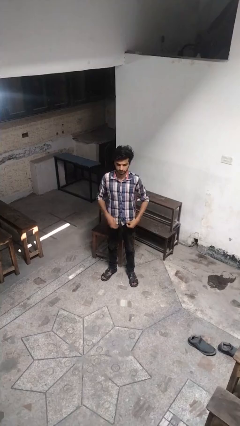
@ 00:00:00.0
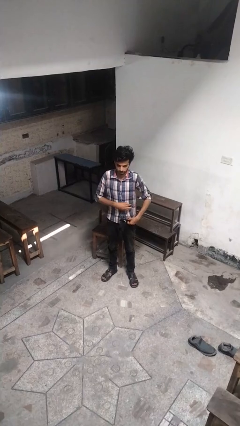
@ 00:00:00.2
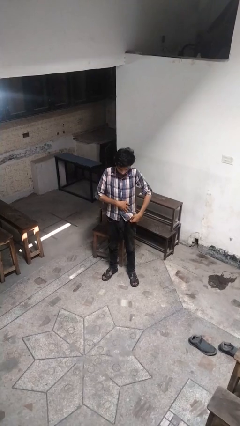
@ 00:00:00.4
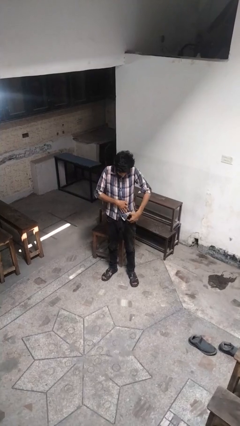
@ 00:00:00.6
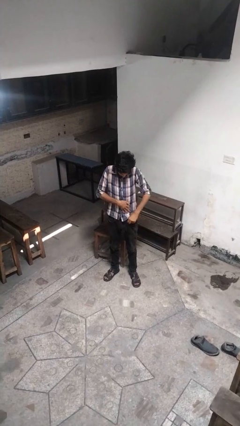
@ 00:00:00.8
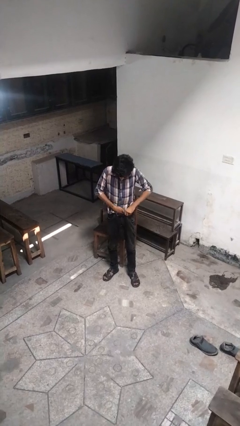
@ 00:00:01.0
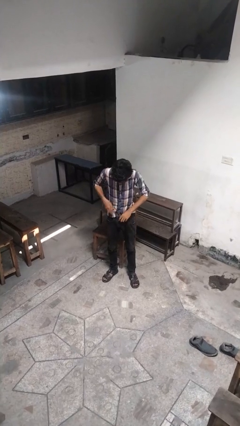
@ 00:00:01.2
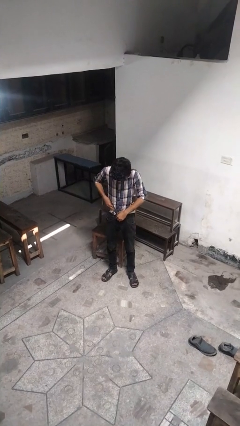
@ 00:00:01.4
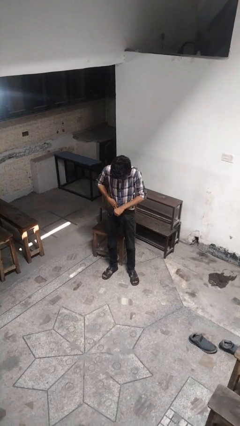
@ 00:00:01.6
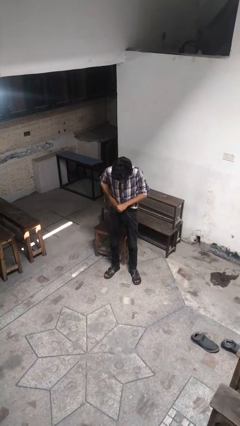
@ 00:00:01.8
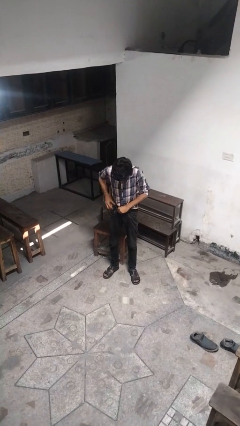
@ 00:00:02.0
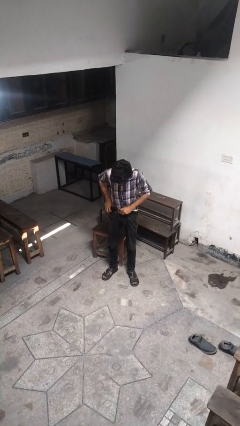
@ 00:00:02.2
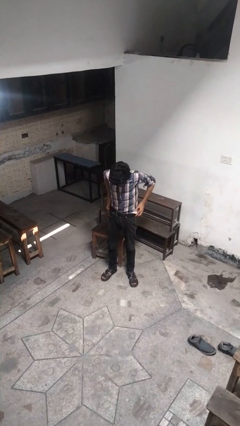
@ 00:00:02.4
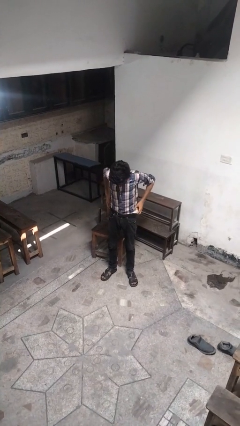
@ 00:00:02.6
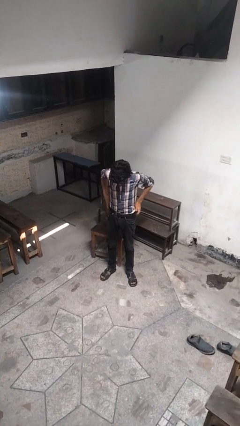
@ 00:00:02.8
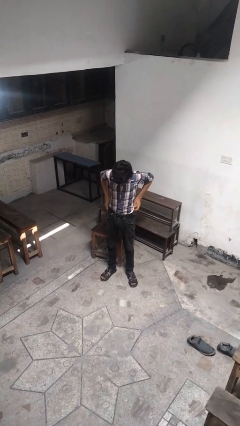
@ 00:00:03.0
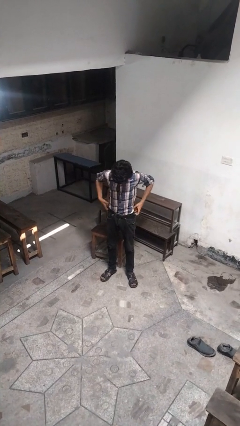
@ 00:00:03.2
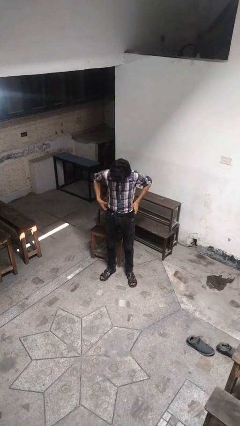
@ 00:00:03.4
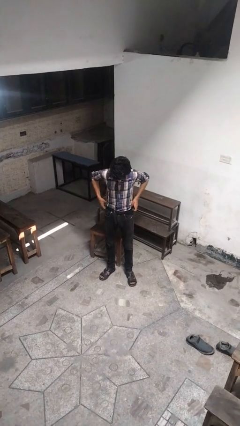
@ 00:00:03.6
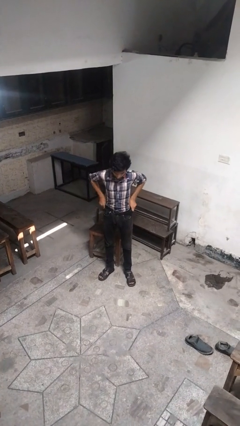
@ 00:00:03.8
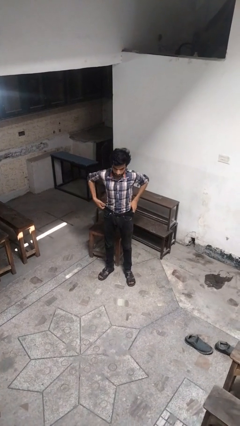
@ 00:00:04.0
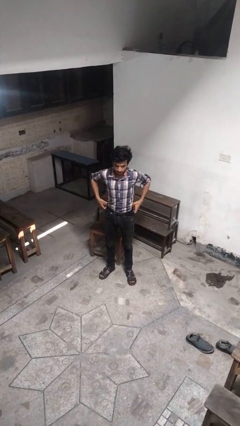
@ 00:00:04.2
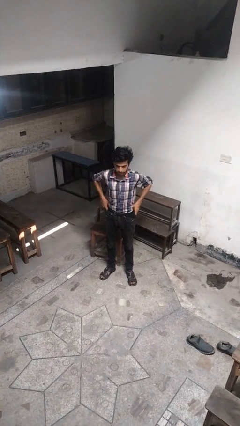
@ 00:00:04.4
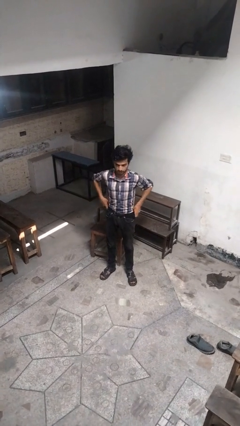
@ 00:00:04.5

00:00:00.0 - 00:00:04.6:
person tucks in shirt

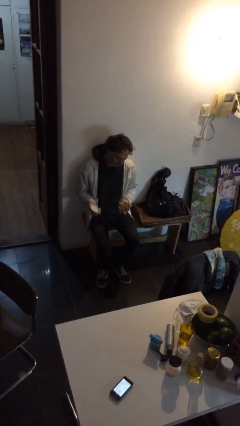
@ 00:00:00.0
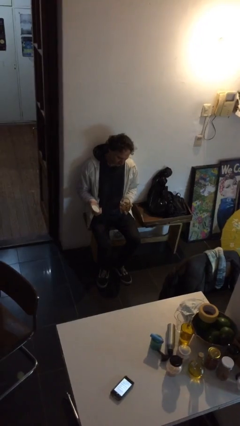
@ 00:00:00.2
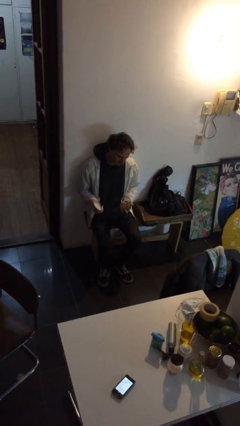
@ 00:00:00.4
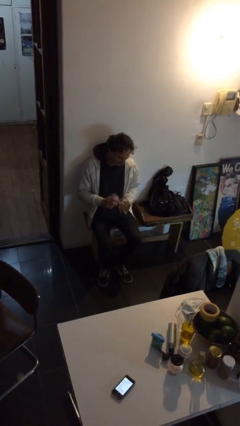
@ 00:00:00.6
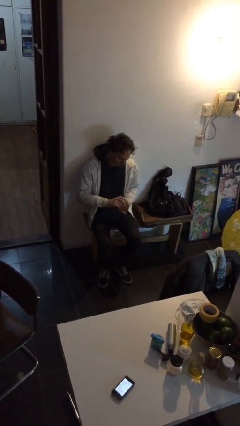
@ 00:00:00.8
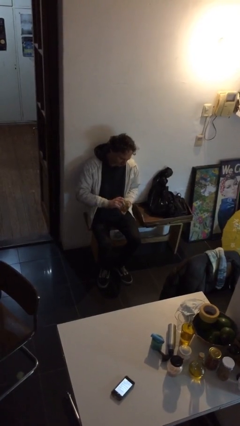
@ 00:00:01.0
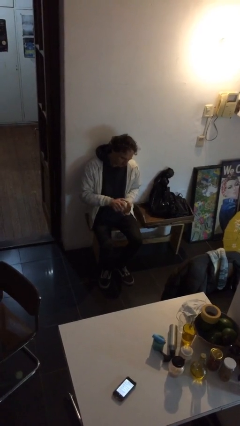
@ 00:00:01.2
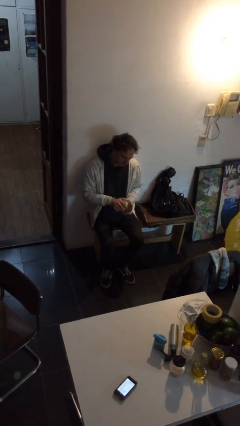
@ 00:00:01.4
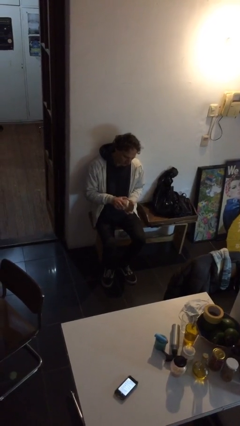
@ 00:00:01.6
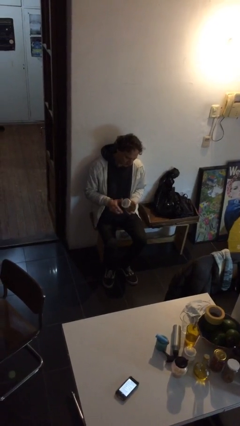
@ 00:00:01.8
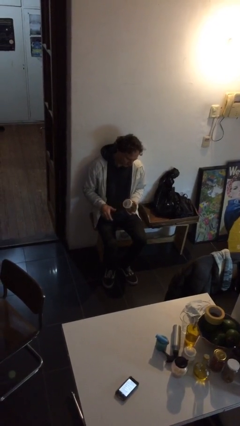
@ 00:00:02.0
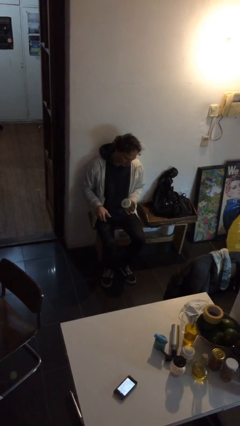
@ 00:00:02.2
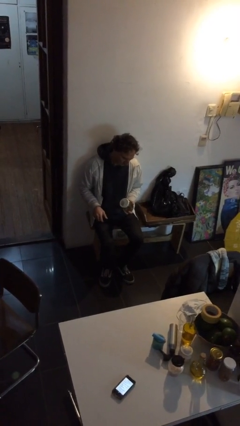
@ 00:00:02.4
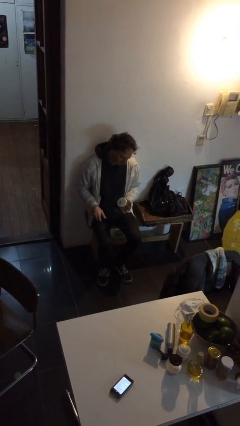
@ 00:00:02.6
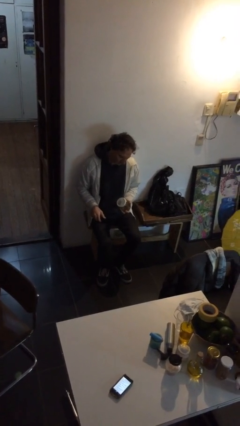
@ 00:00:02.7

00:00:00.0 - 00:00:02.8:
person closes jar

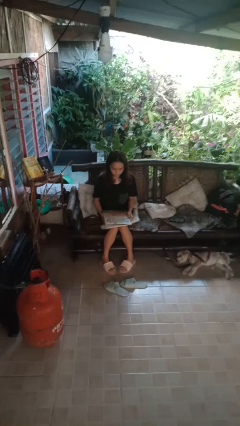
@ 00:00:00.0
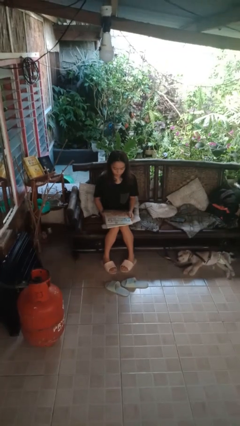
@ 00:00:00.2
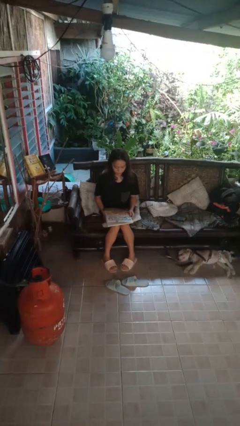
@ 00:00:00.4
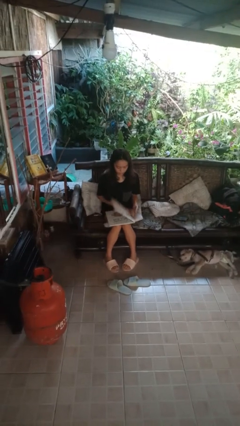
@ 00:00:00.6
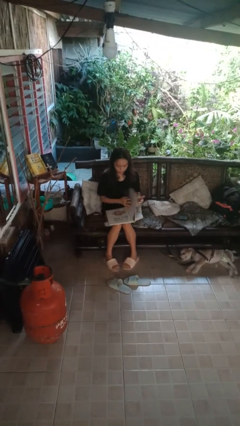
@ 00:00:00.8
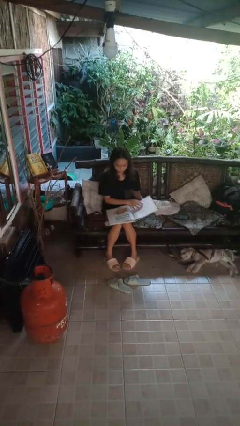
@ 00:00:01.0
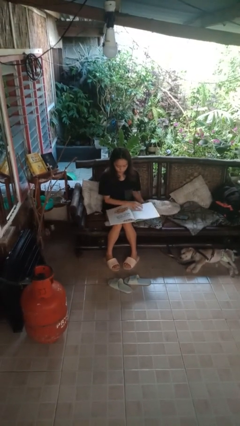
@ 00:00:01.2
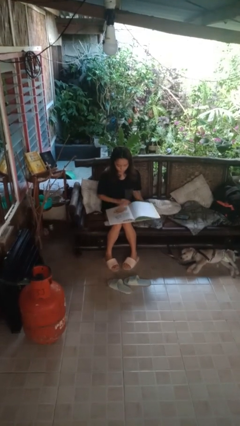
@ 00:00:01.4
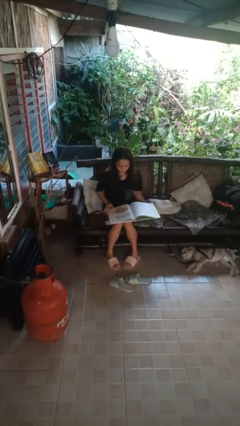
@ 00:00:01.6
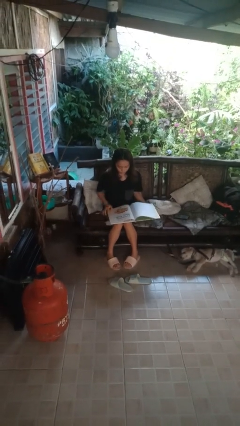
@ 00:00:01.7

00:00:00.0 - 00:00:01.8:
person reads book

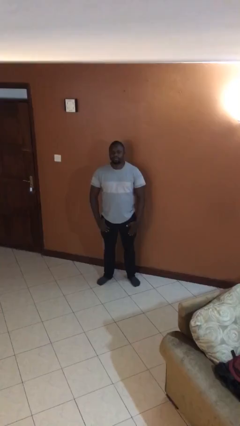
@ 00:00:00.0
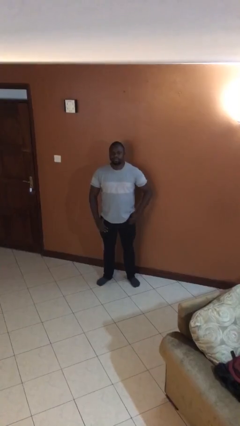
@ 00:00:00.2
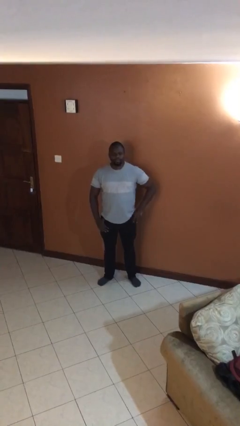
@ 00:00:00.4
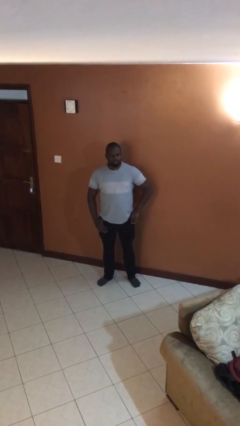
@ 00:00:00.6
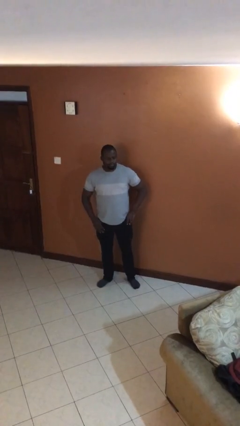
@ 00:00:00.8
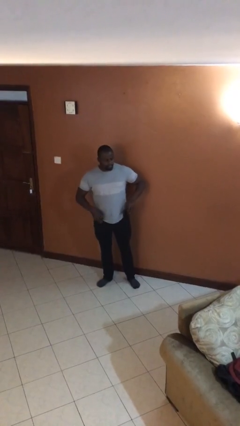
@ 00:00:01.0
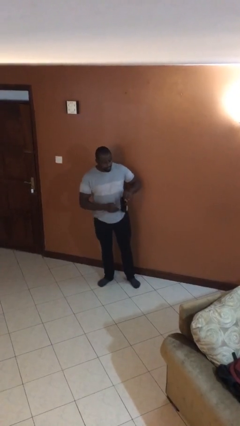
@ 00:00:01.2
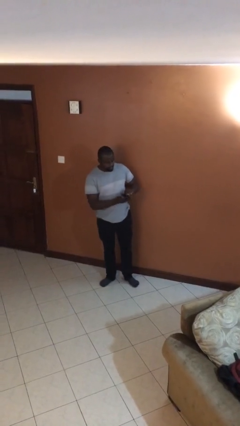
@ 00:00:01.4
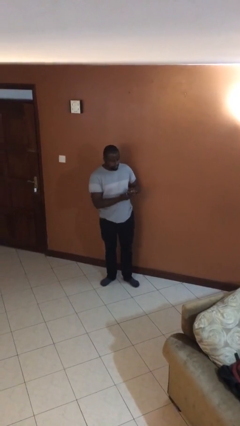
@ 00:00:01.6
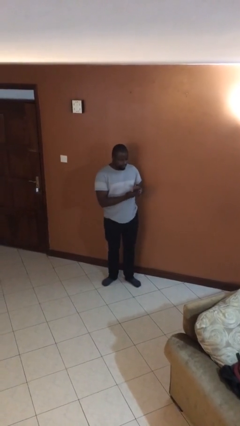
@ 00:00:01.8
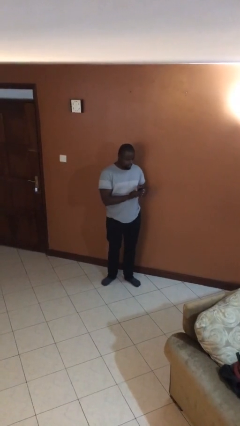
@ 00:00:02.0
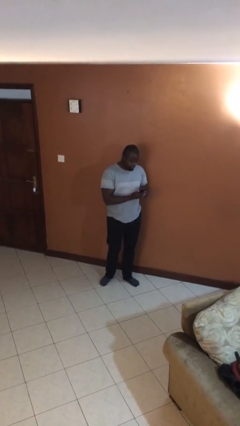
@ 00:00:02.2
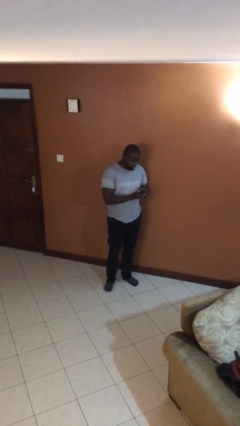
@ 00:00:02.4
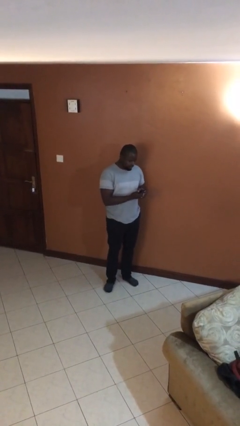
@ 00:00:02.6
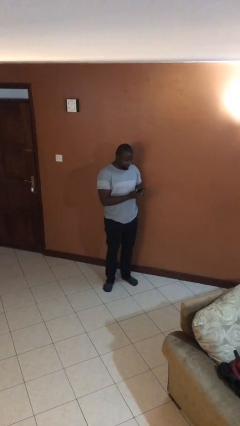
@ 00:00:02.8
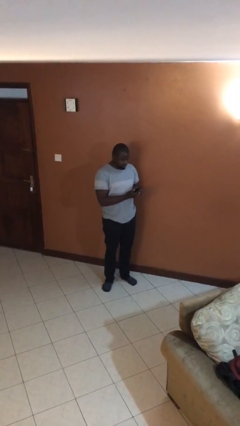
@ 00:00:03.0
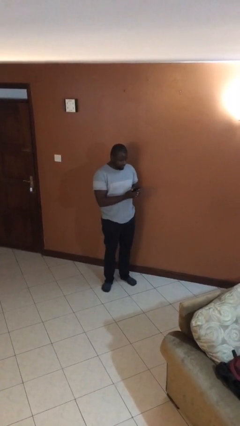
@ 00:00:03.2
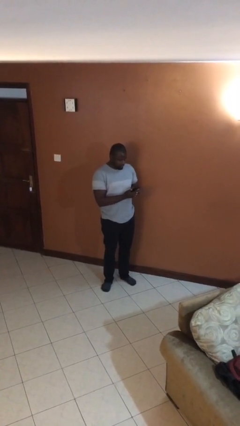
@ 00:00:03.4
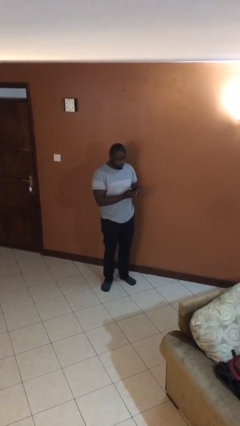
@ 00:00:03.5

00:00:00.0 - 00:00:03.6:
person takes phone from pocket

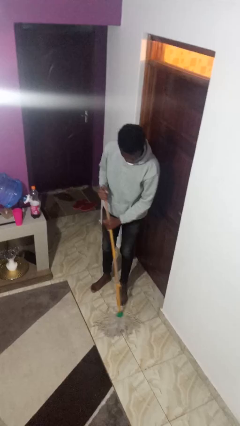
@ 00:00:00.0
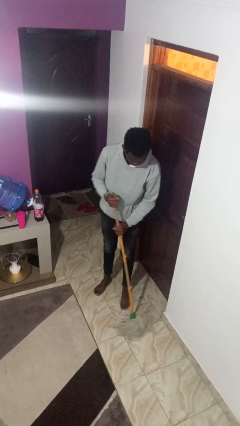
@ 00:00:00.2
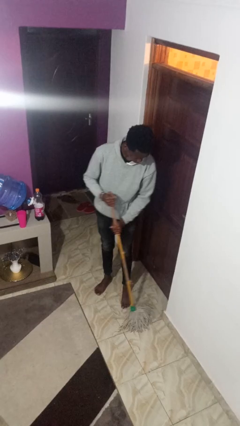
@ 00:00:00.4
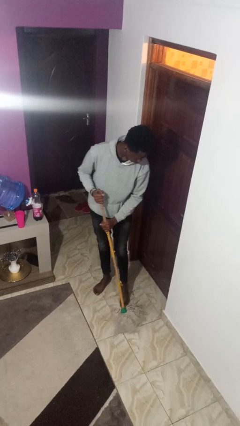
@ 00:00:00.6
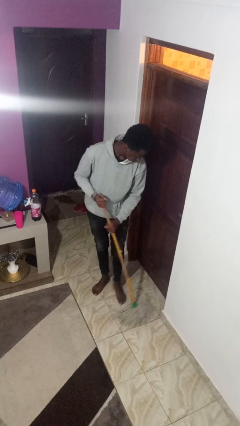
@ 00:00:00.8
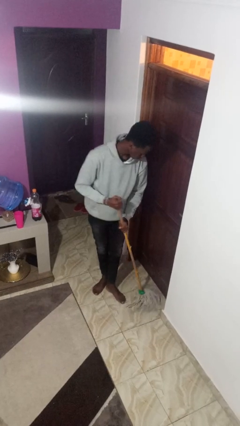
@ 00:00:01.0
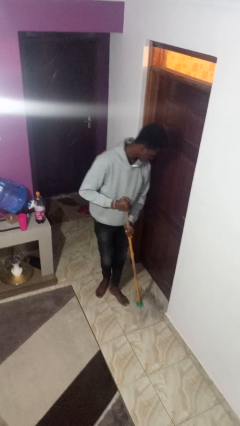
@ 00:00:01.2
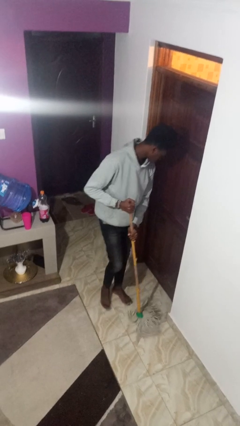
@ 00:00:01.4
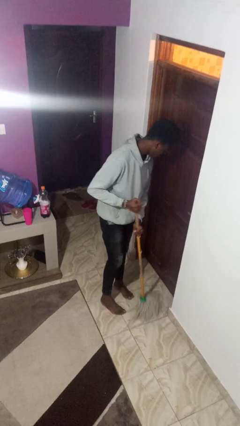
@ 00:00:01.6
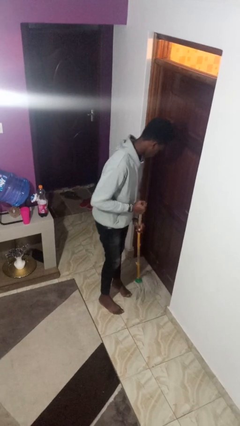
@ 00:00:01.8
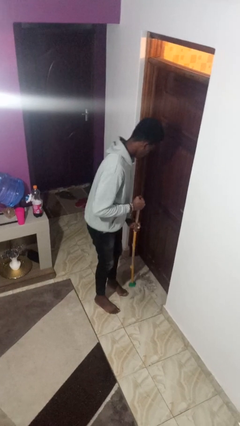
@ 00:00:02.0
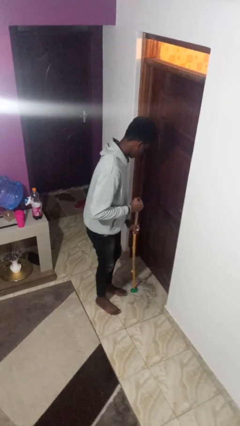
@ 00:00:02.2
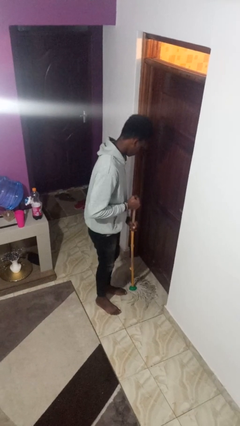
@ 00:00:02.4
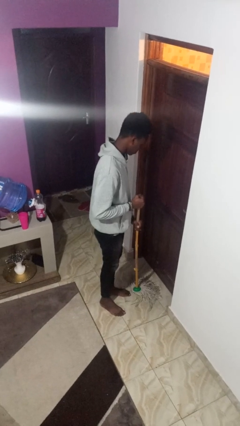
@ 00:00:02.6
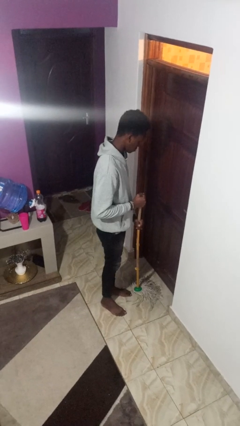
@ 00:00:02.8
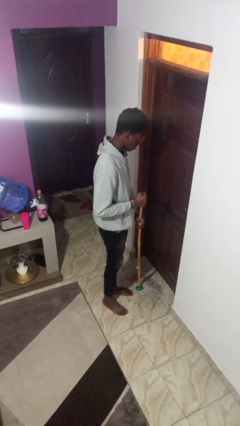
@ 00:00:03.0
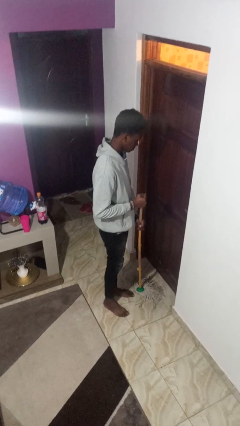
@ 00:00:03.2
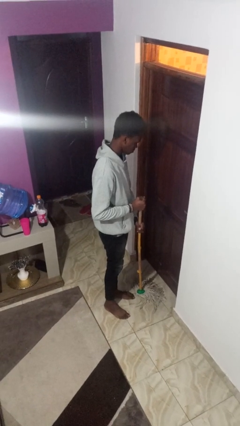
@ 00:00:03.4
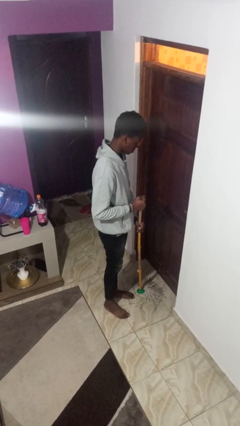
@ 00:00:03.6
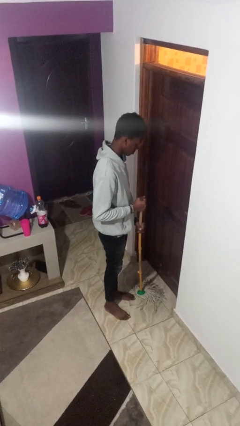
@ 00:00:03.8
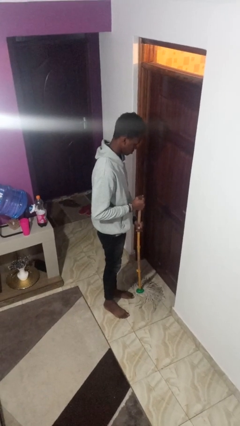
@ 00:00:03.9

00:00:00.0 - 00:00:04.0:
person mops

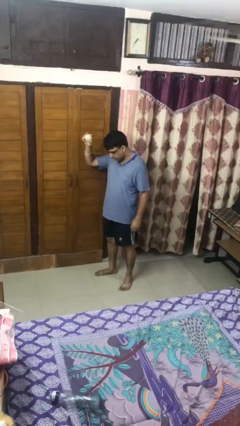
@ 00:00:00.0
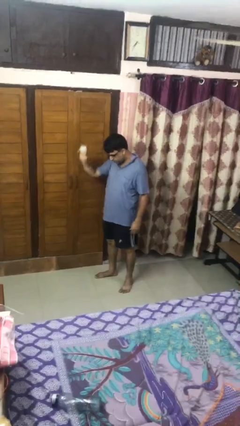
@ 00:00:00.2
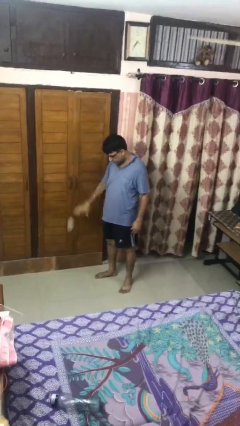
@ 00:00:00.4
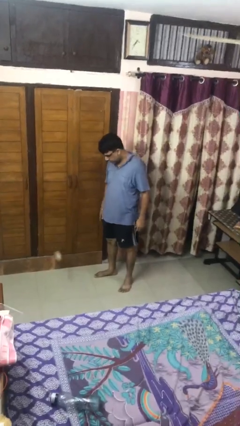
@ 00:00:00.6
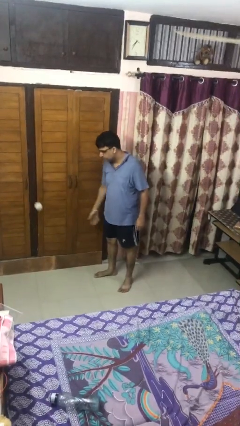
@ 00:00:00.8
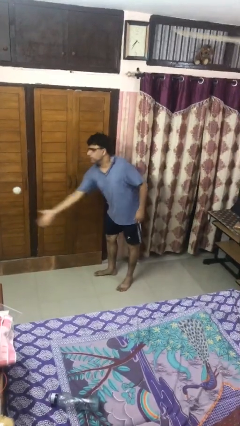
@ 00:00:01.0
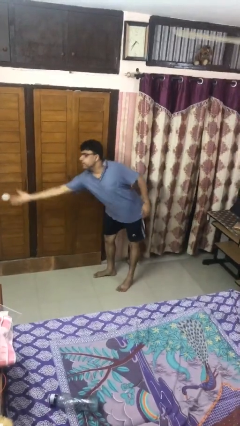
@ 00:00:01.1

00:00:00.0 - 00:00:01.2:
person bounces ball on floor
